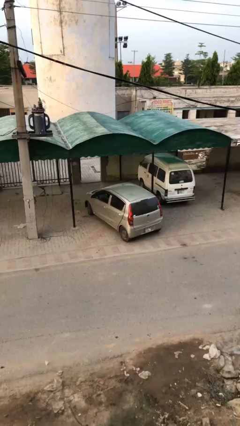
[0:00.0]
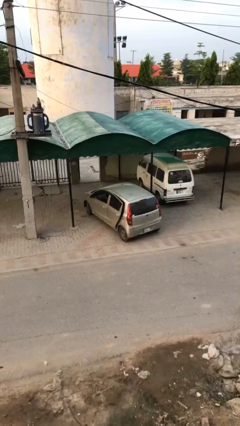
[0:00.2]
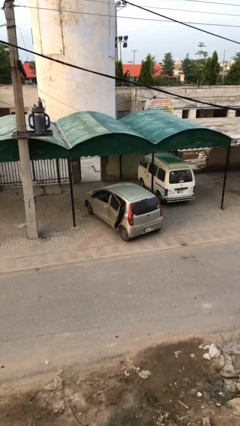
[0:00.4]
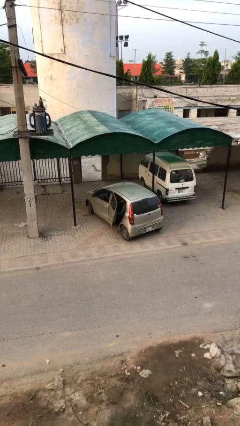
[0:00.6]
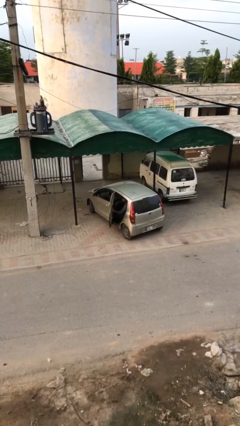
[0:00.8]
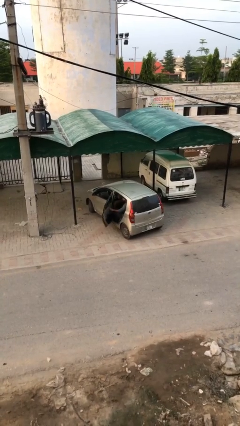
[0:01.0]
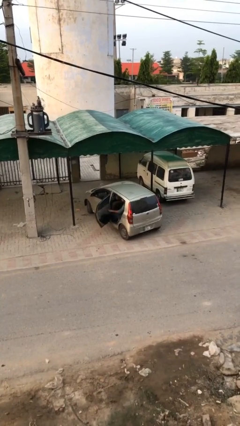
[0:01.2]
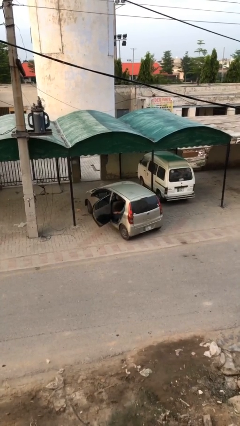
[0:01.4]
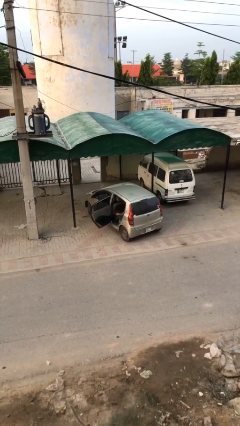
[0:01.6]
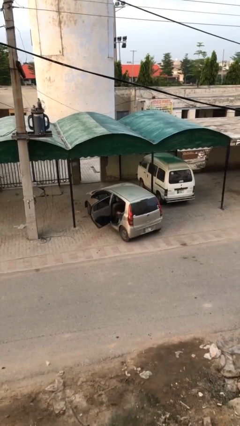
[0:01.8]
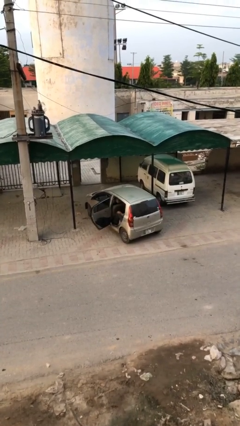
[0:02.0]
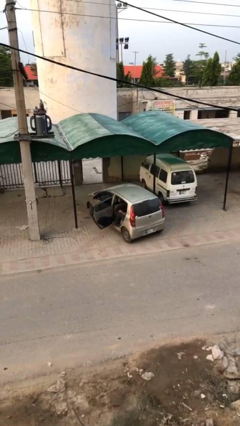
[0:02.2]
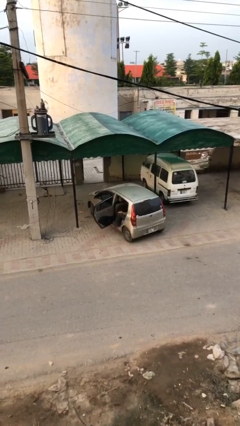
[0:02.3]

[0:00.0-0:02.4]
person opens car door

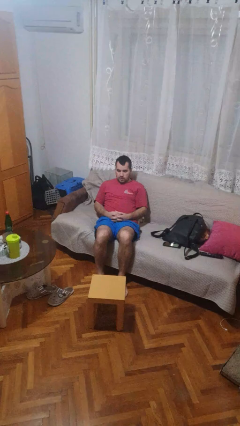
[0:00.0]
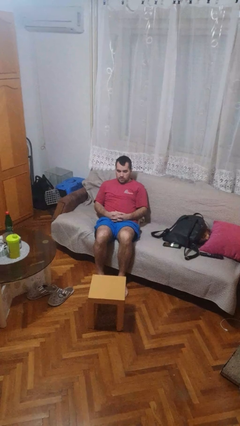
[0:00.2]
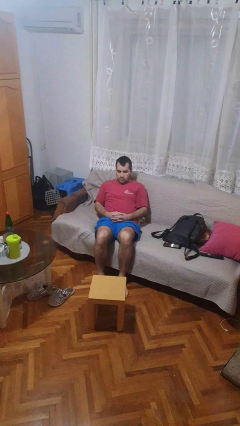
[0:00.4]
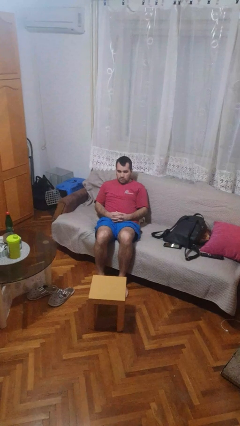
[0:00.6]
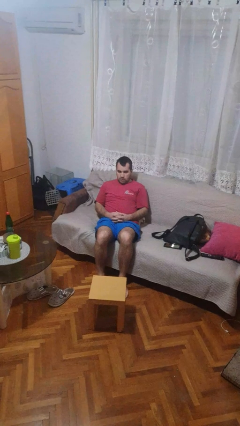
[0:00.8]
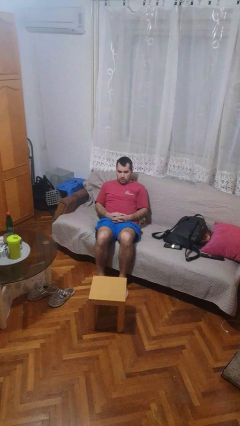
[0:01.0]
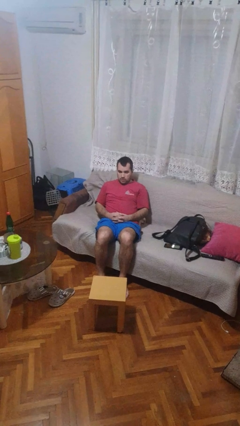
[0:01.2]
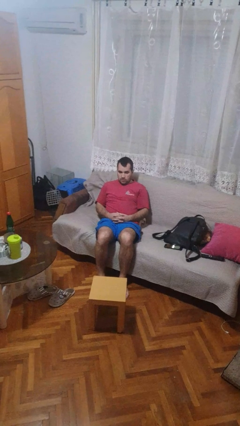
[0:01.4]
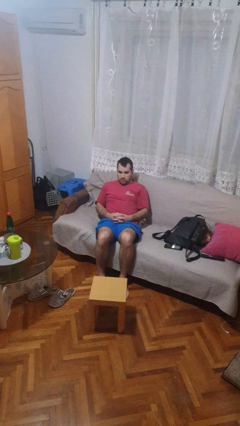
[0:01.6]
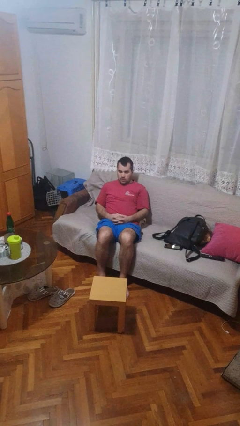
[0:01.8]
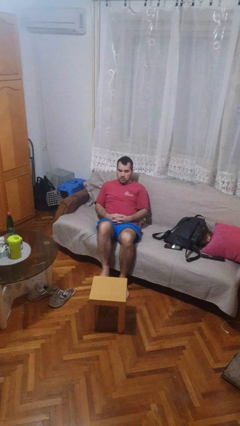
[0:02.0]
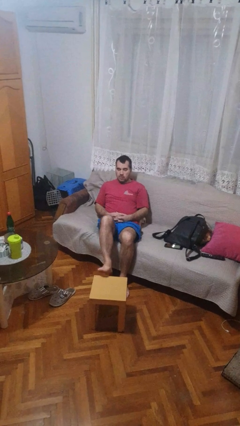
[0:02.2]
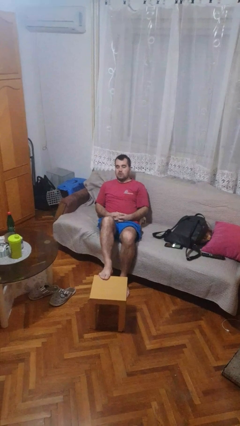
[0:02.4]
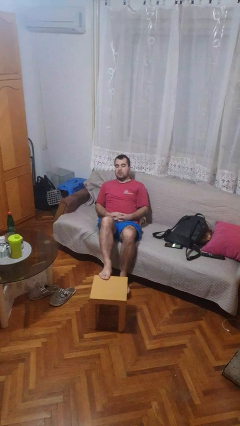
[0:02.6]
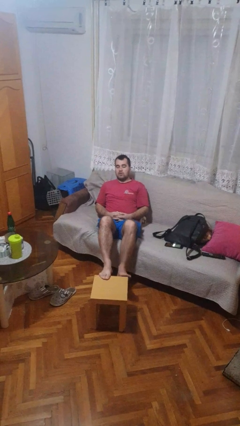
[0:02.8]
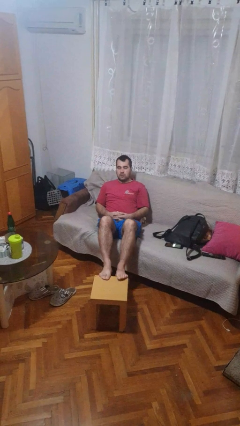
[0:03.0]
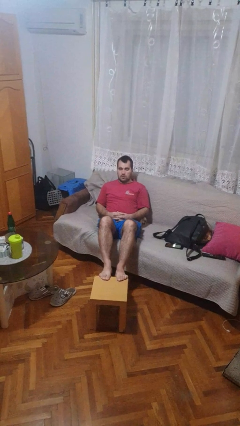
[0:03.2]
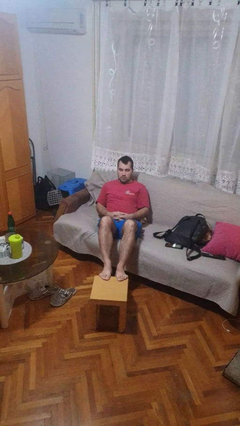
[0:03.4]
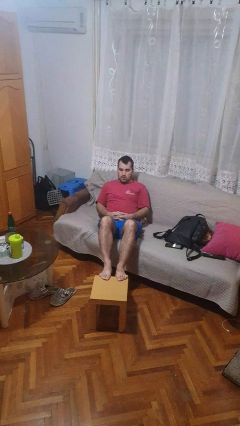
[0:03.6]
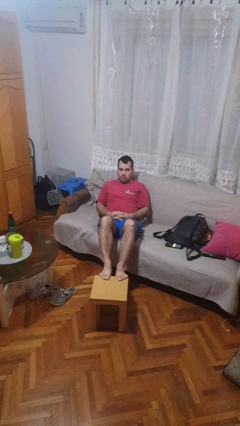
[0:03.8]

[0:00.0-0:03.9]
person puts feet up

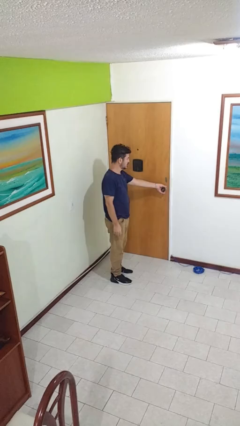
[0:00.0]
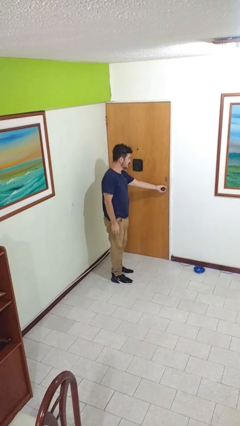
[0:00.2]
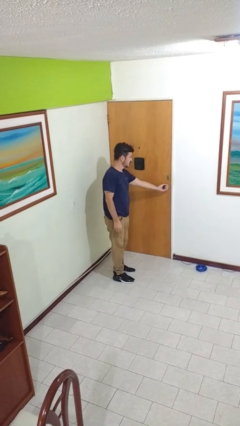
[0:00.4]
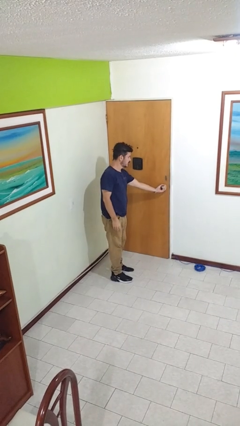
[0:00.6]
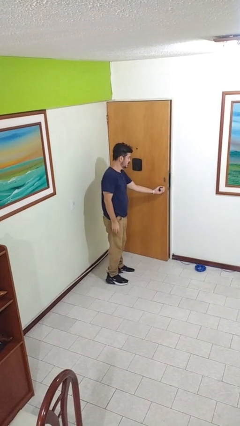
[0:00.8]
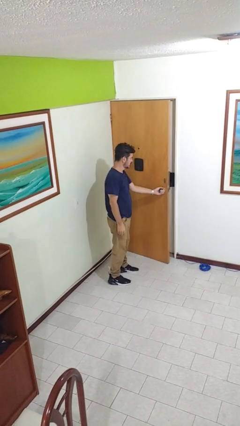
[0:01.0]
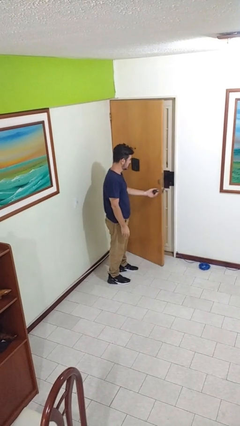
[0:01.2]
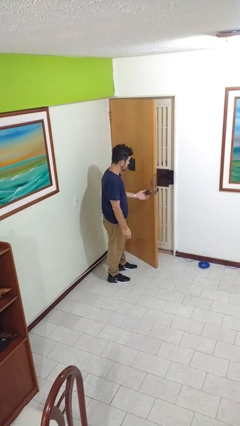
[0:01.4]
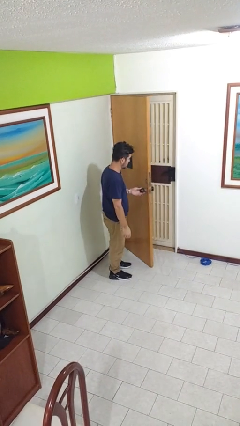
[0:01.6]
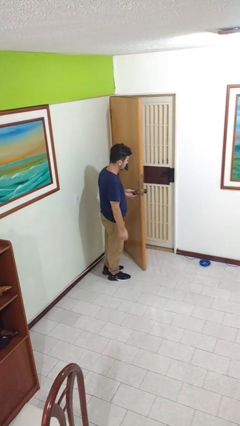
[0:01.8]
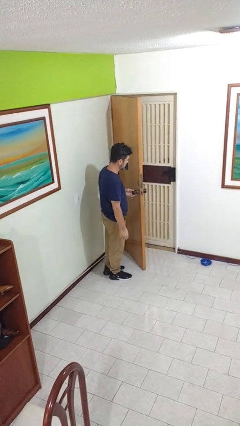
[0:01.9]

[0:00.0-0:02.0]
person opens facility door

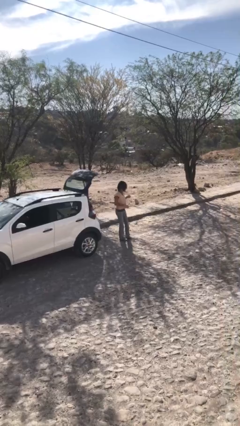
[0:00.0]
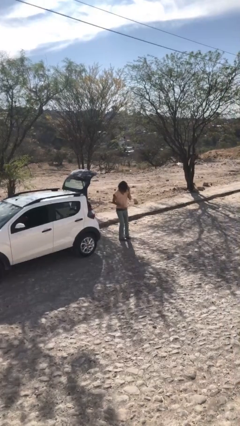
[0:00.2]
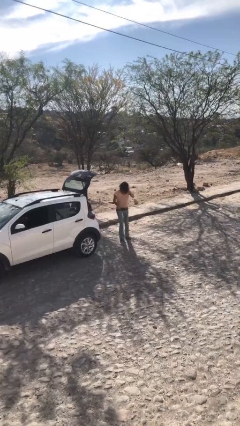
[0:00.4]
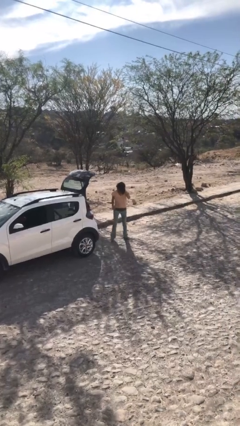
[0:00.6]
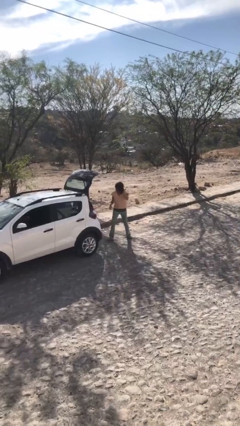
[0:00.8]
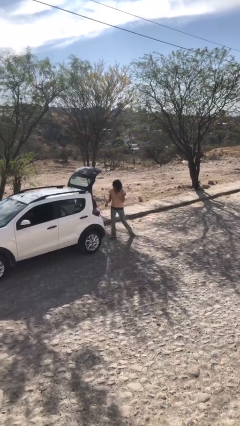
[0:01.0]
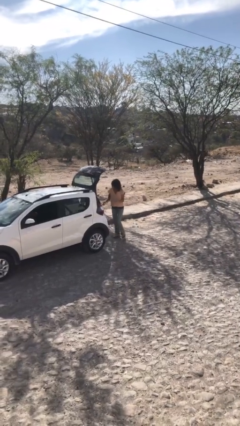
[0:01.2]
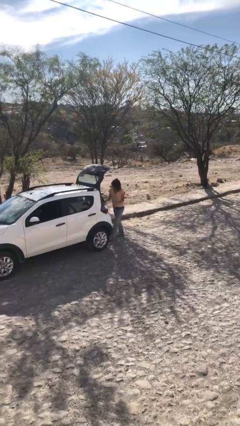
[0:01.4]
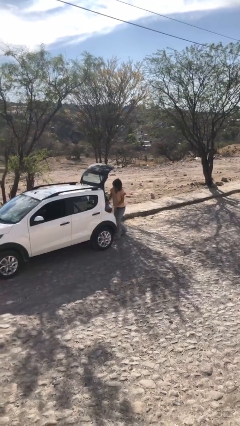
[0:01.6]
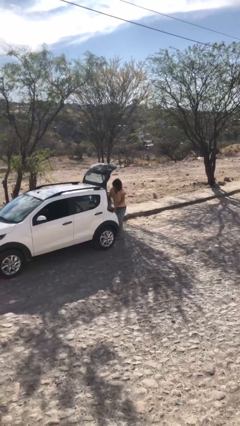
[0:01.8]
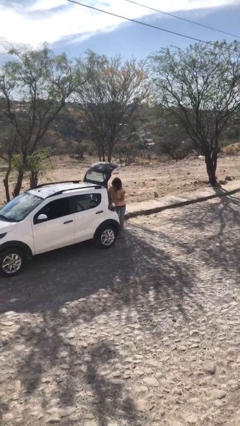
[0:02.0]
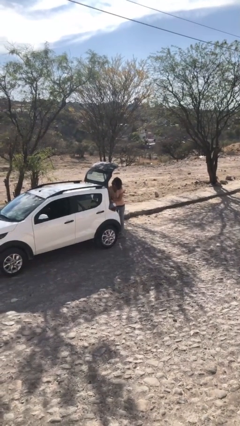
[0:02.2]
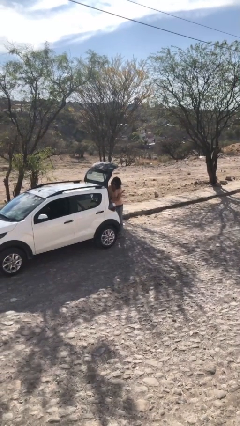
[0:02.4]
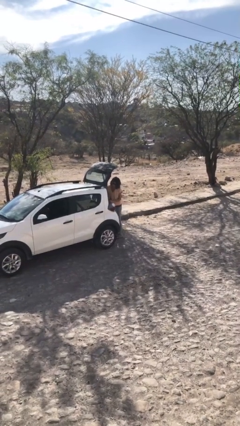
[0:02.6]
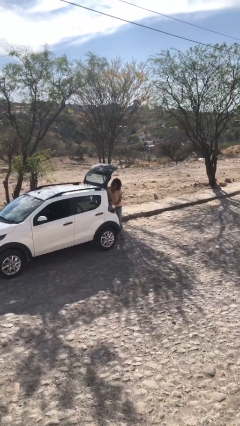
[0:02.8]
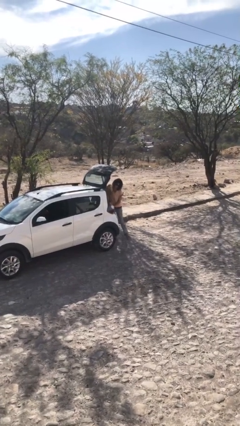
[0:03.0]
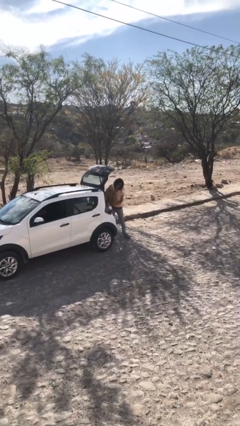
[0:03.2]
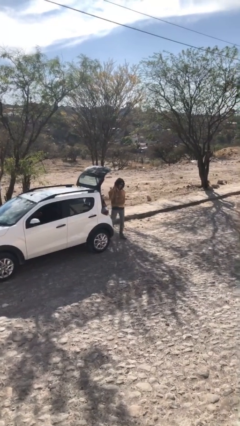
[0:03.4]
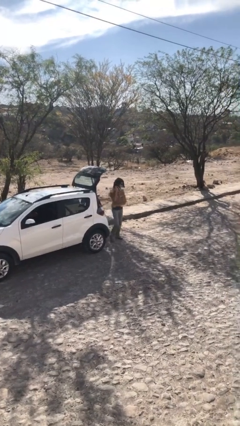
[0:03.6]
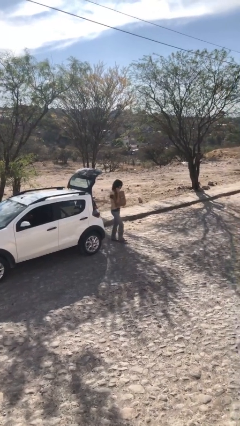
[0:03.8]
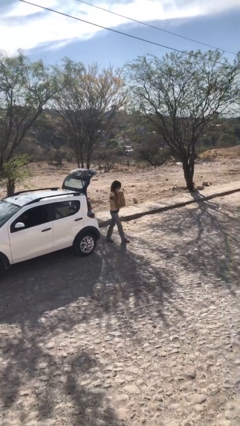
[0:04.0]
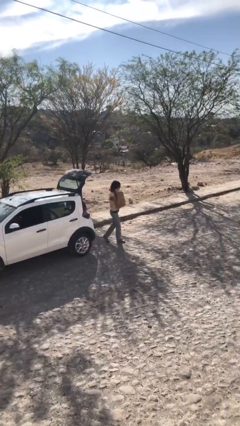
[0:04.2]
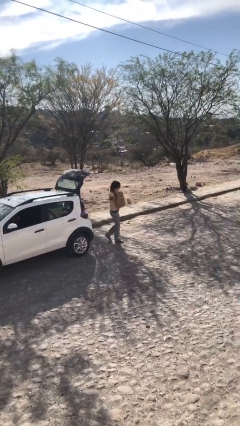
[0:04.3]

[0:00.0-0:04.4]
person unloads car

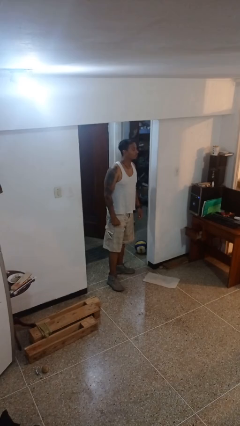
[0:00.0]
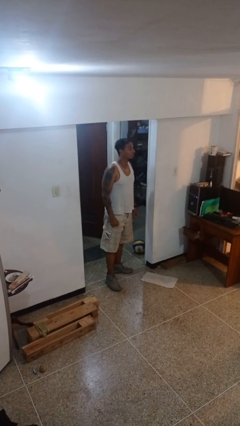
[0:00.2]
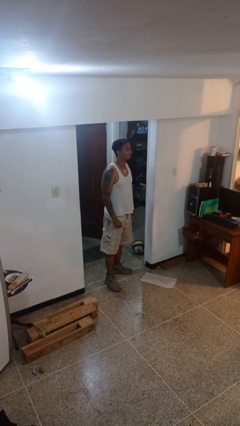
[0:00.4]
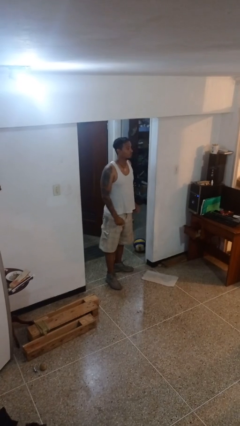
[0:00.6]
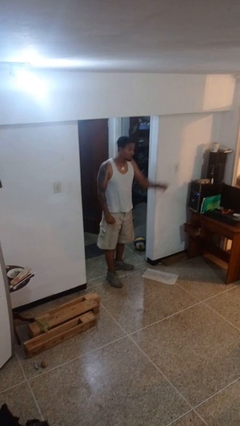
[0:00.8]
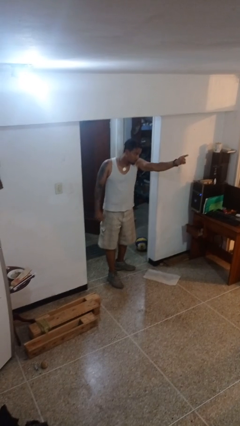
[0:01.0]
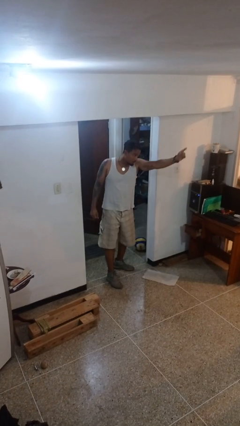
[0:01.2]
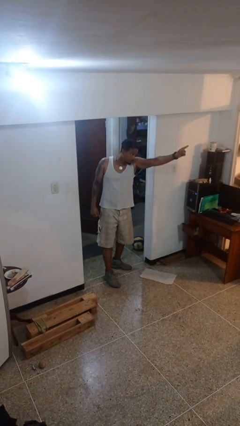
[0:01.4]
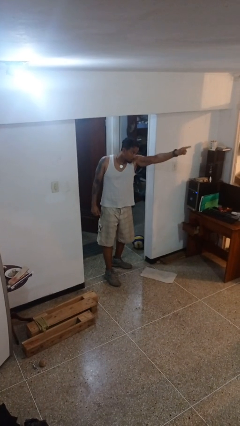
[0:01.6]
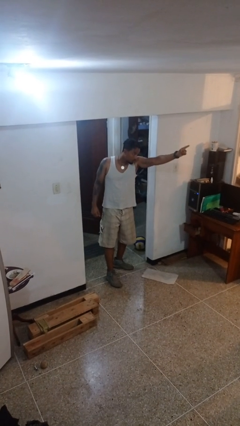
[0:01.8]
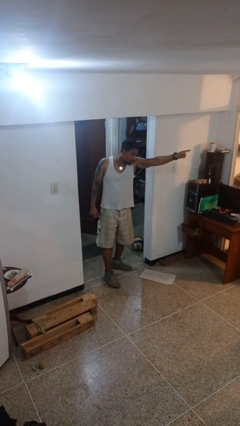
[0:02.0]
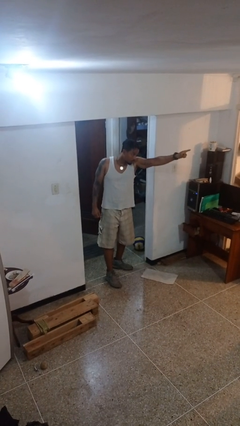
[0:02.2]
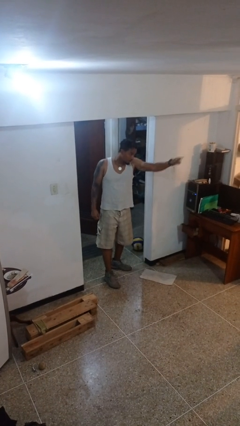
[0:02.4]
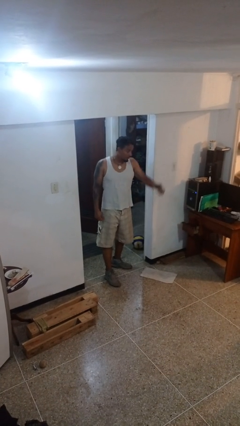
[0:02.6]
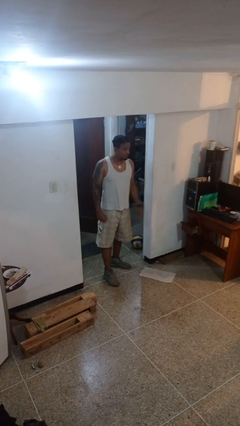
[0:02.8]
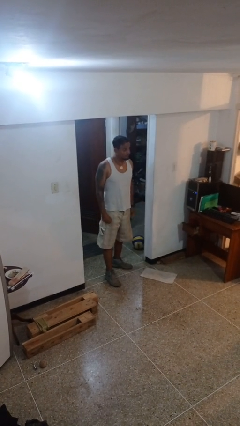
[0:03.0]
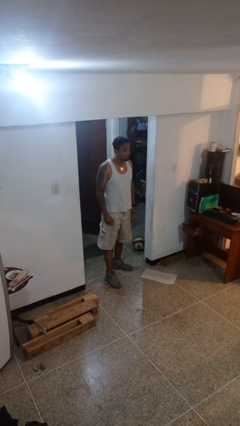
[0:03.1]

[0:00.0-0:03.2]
person points at person

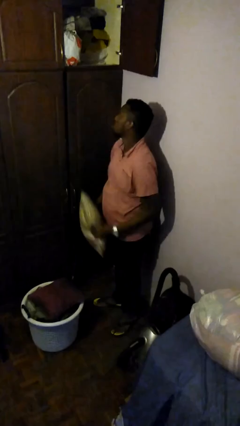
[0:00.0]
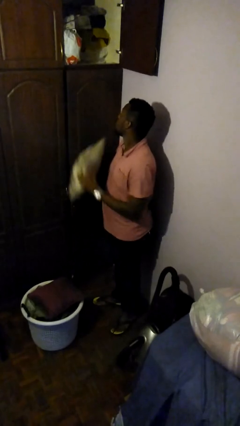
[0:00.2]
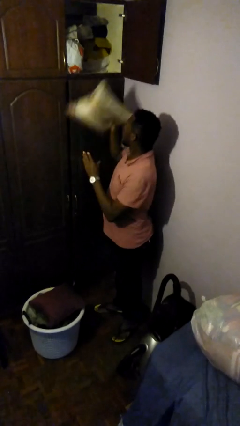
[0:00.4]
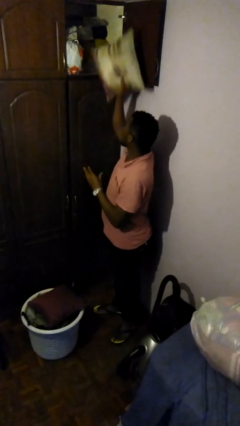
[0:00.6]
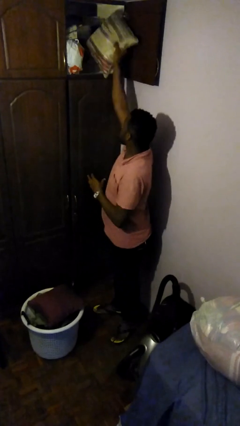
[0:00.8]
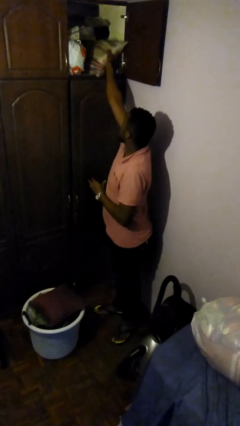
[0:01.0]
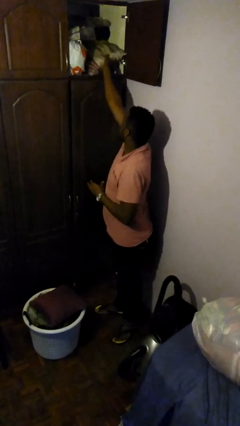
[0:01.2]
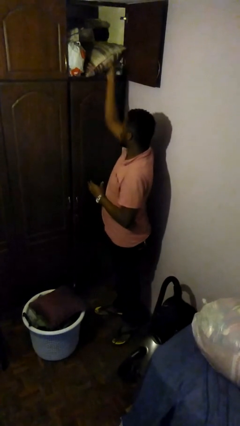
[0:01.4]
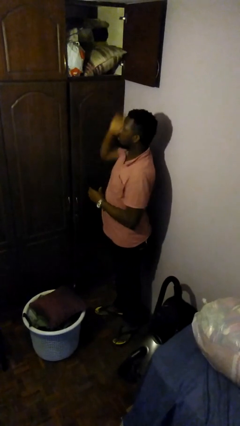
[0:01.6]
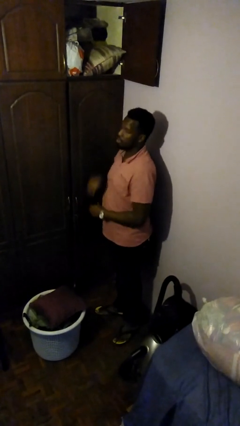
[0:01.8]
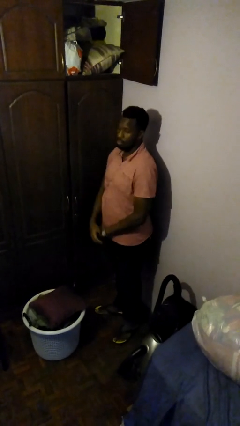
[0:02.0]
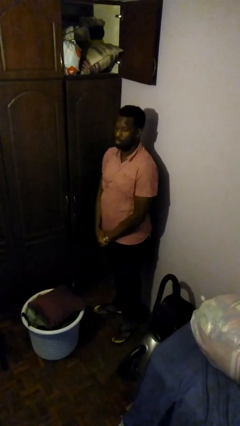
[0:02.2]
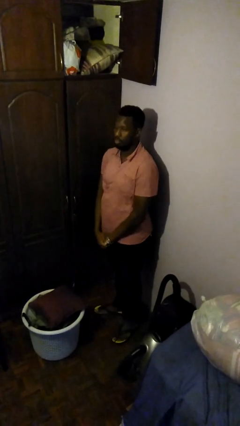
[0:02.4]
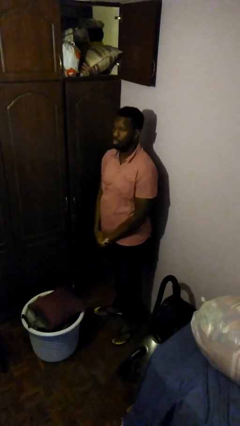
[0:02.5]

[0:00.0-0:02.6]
person puts down object on shelf
